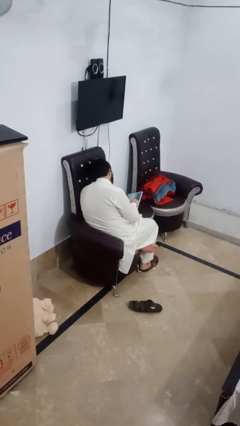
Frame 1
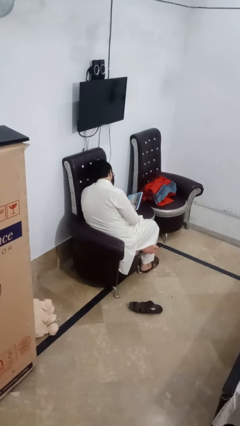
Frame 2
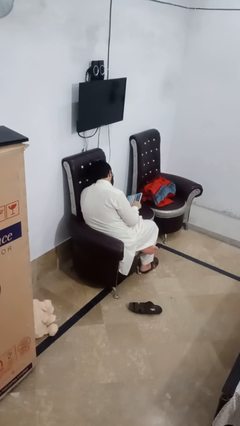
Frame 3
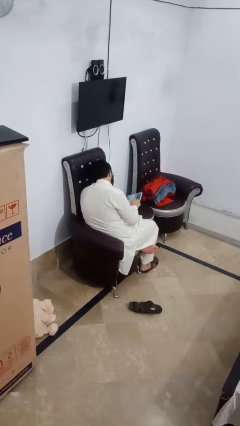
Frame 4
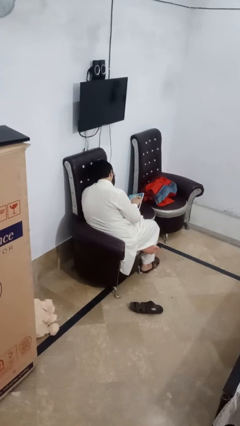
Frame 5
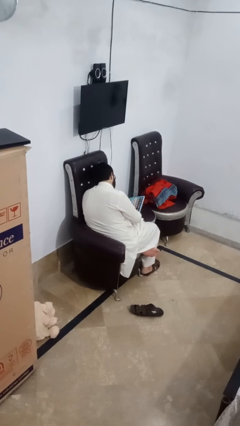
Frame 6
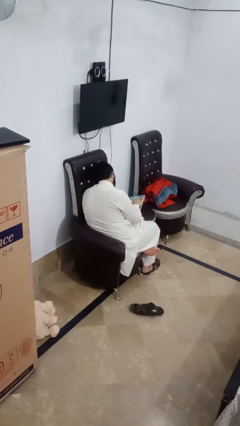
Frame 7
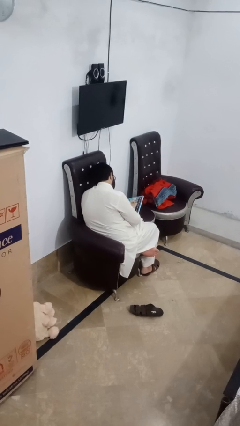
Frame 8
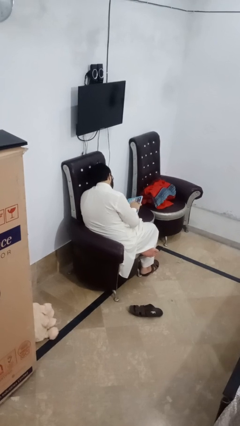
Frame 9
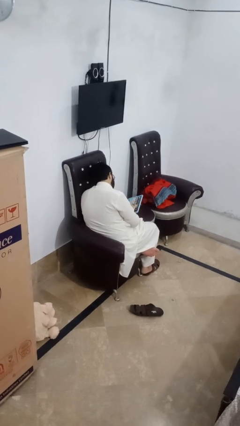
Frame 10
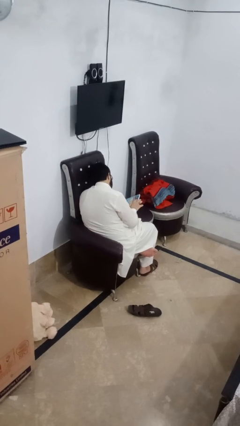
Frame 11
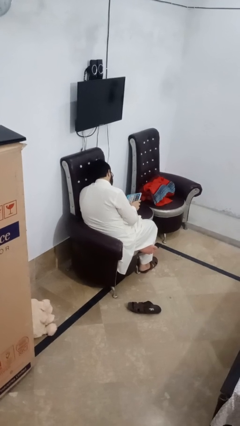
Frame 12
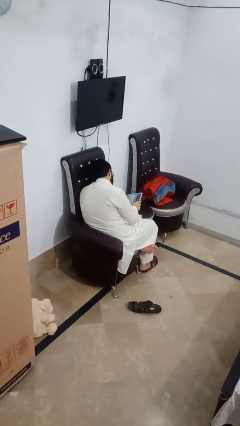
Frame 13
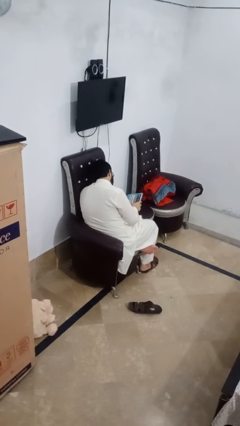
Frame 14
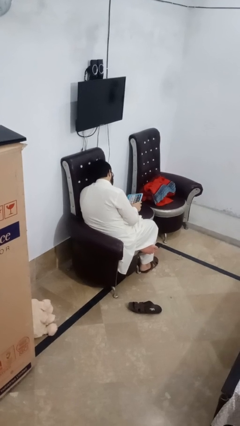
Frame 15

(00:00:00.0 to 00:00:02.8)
person interacts with tablet

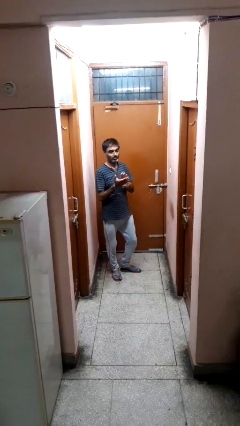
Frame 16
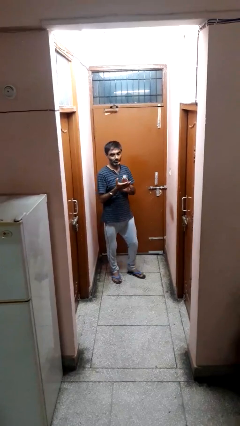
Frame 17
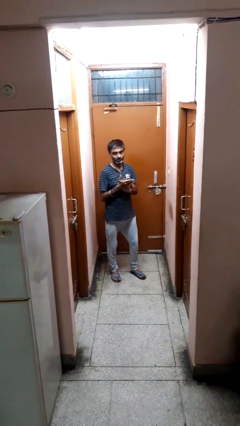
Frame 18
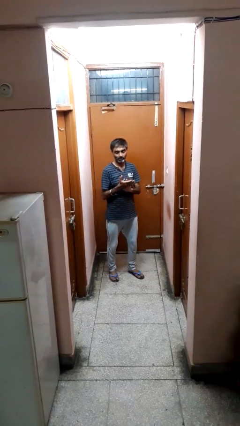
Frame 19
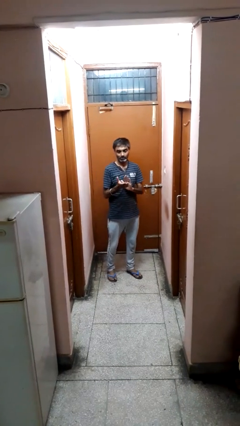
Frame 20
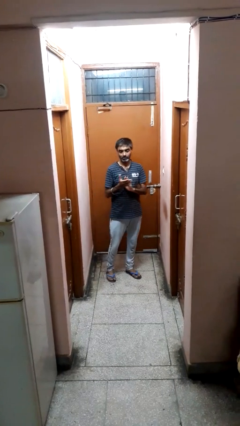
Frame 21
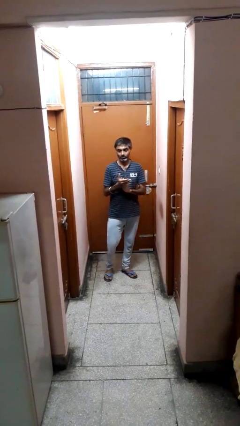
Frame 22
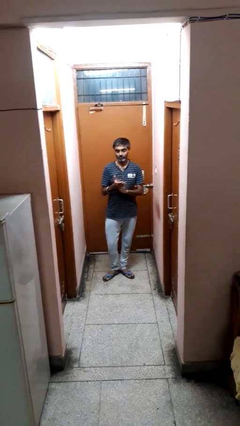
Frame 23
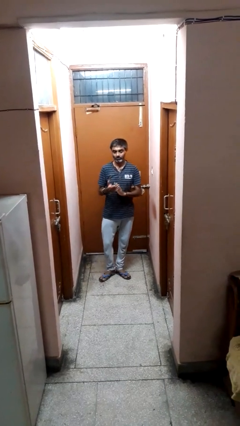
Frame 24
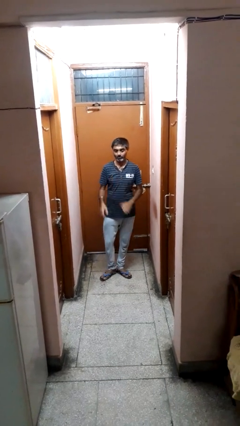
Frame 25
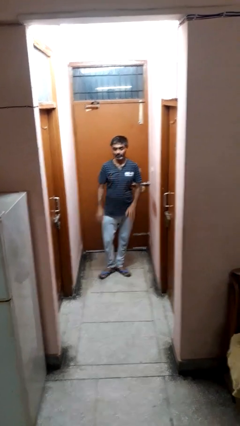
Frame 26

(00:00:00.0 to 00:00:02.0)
person claps hands

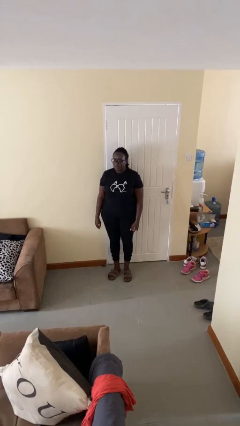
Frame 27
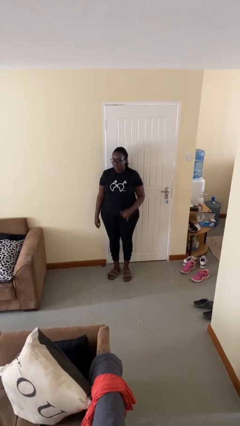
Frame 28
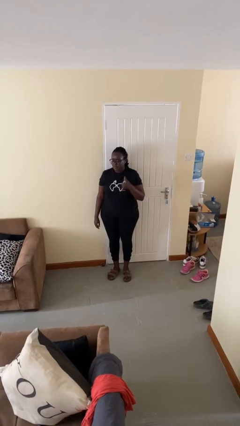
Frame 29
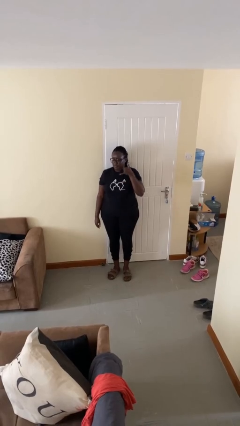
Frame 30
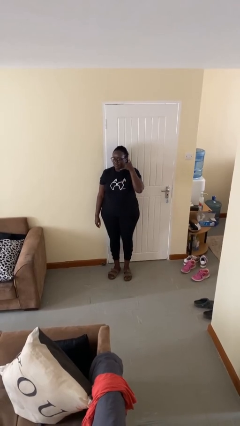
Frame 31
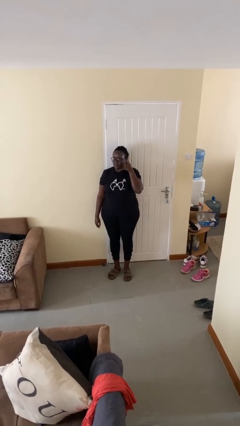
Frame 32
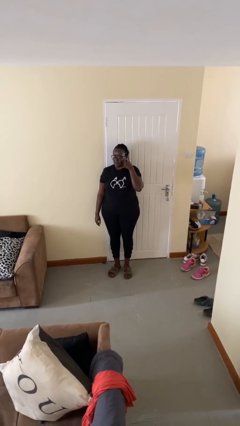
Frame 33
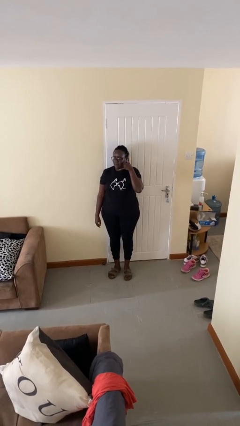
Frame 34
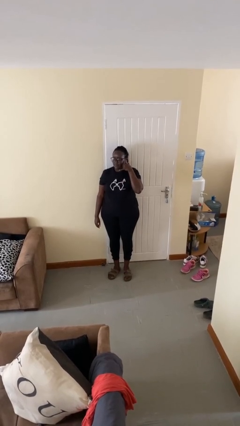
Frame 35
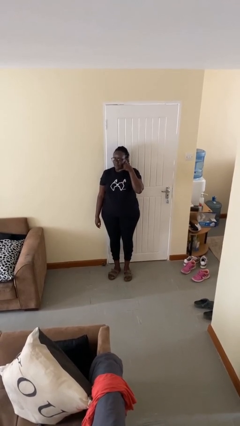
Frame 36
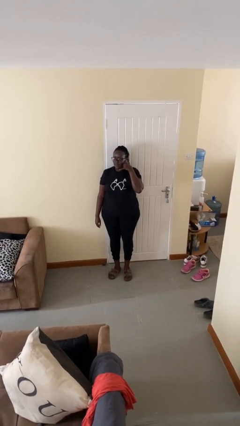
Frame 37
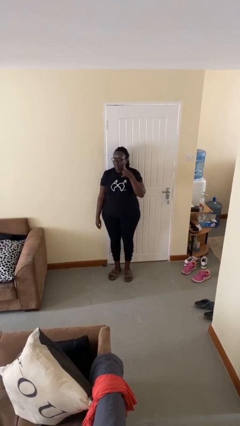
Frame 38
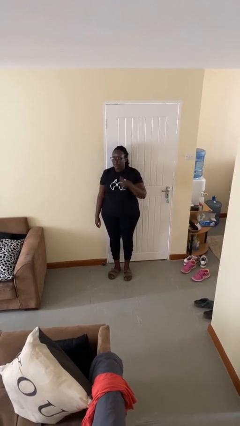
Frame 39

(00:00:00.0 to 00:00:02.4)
person gestures call me

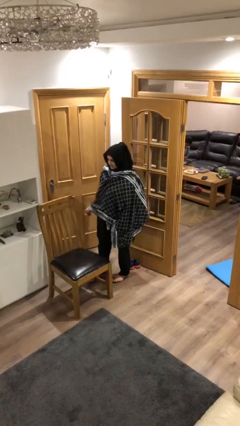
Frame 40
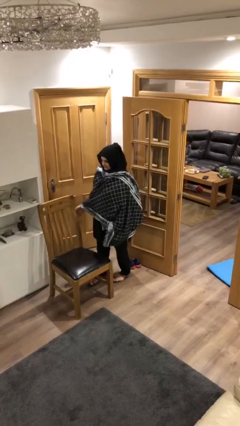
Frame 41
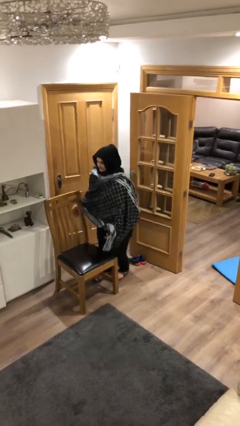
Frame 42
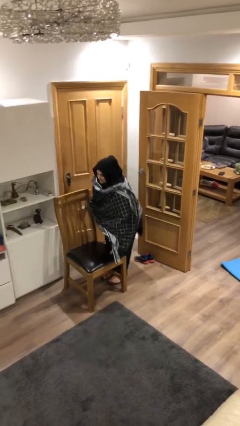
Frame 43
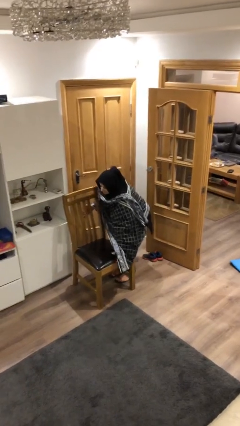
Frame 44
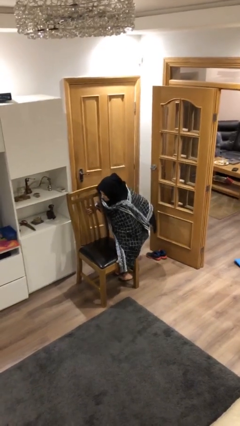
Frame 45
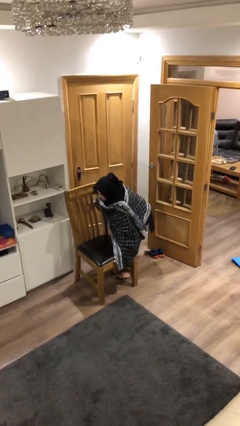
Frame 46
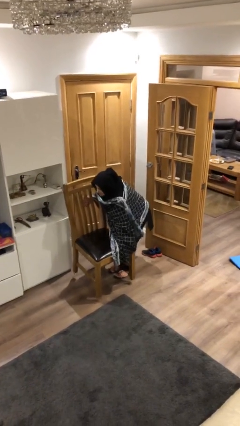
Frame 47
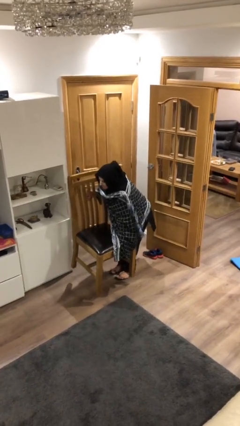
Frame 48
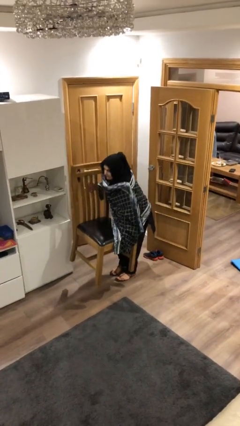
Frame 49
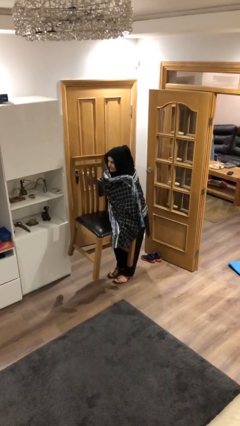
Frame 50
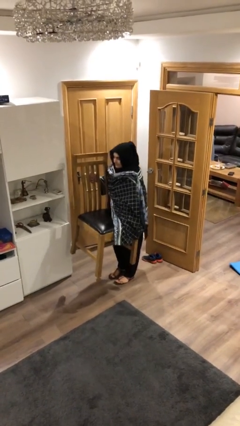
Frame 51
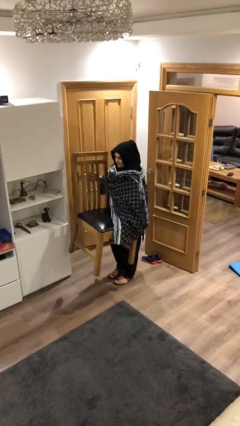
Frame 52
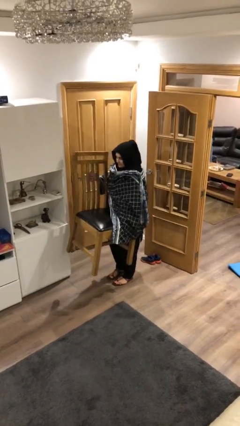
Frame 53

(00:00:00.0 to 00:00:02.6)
person picks up object from floor

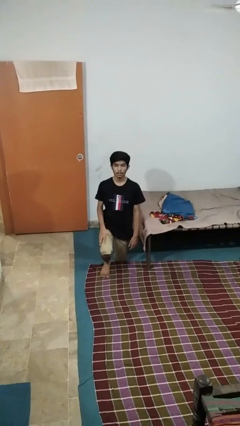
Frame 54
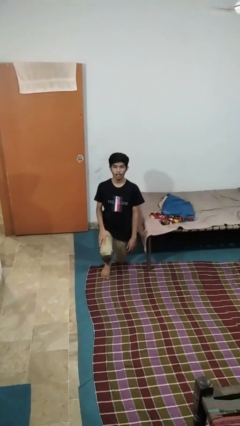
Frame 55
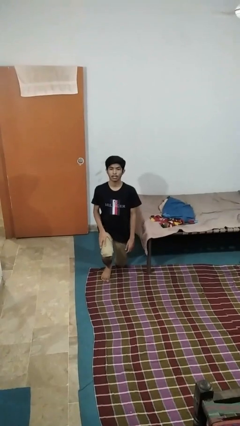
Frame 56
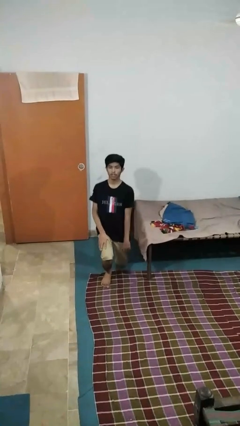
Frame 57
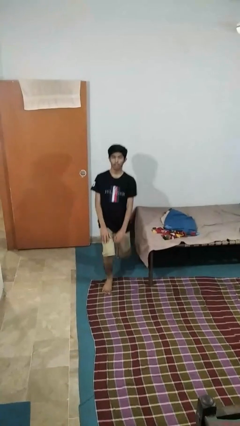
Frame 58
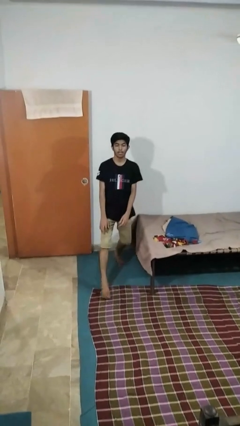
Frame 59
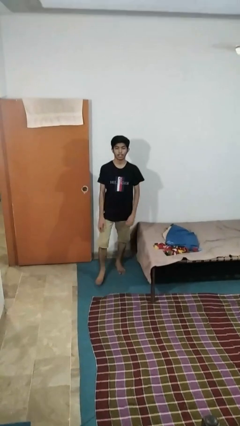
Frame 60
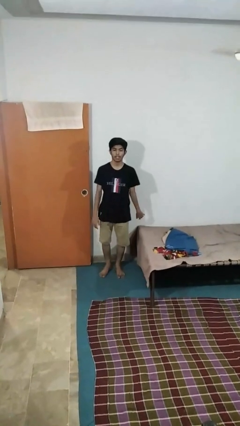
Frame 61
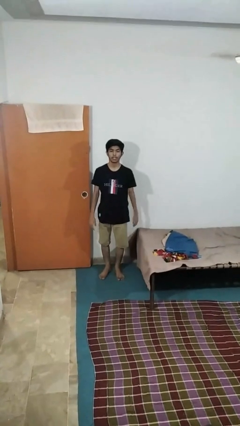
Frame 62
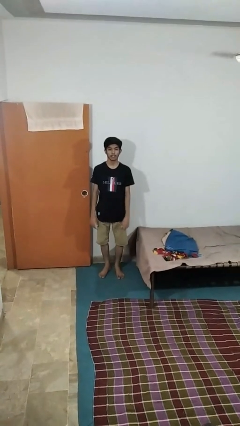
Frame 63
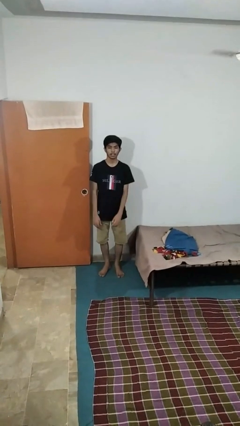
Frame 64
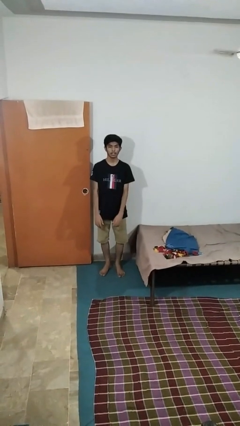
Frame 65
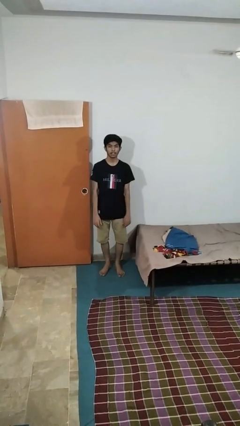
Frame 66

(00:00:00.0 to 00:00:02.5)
person stands up from floor

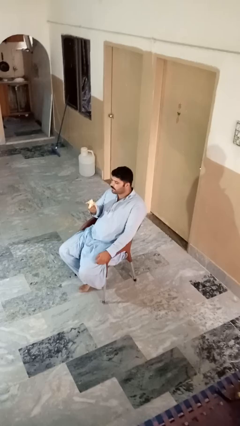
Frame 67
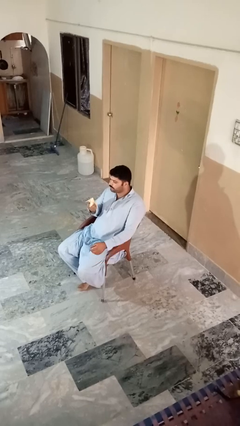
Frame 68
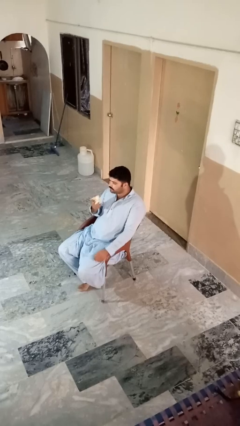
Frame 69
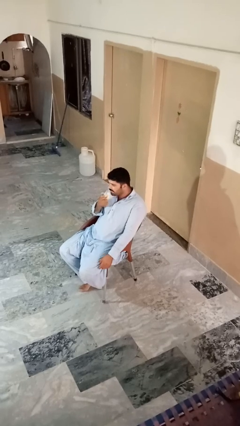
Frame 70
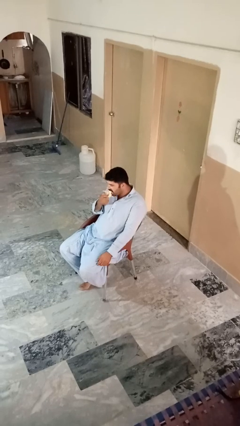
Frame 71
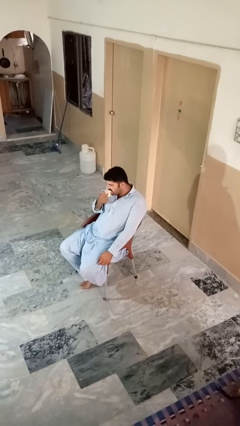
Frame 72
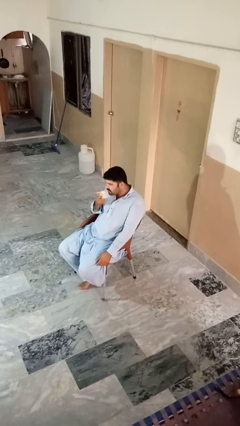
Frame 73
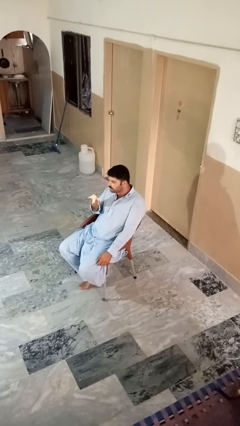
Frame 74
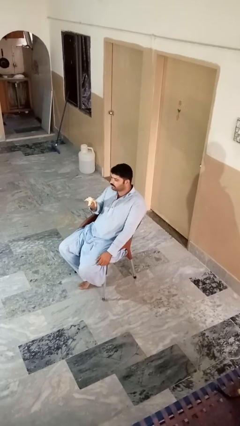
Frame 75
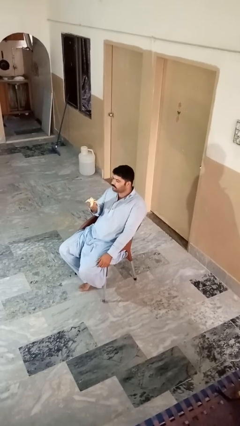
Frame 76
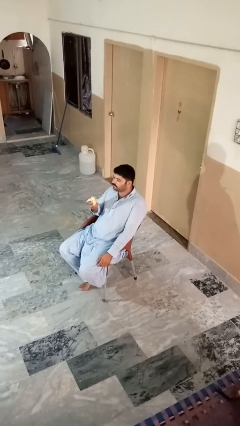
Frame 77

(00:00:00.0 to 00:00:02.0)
person eats banana

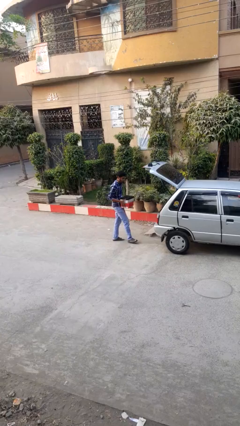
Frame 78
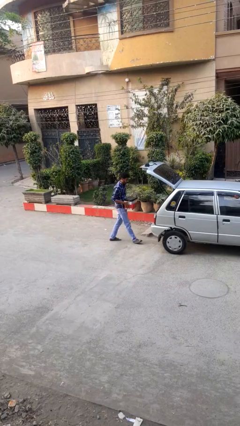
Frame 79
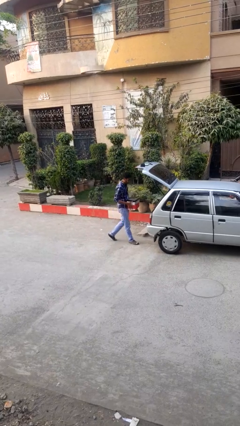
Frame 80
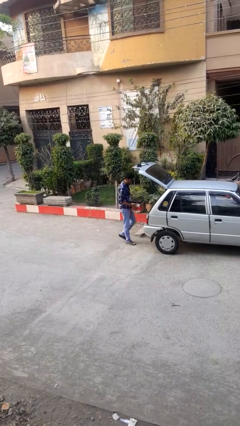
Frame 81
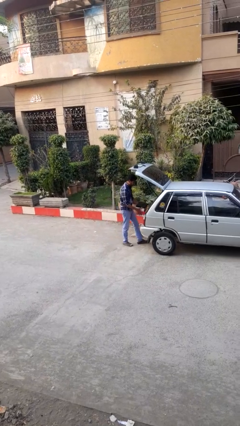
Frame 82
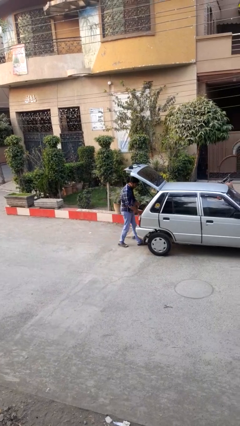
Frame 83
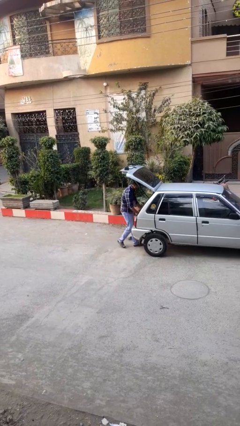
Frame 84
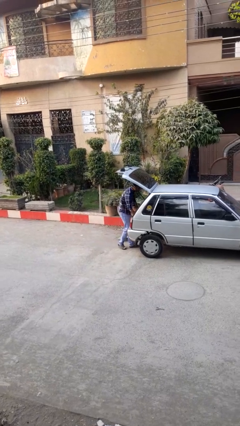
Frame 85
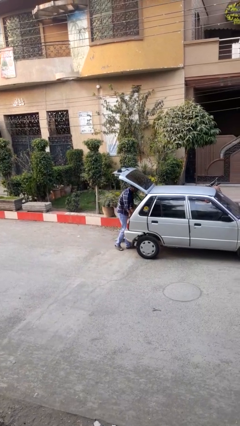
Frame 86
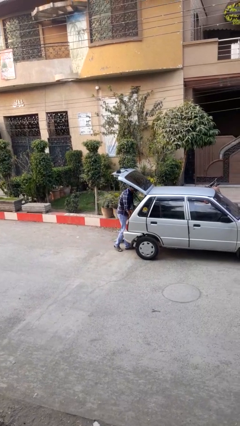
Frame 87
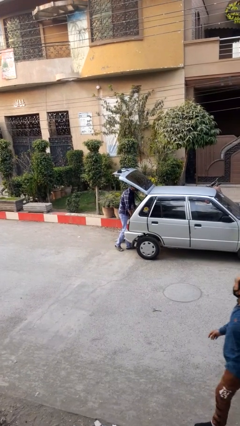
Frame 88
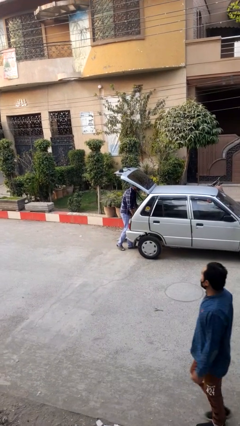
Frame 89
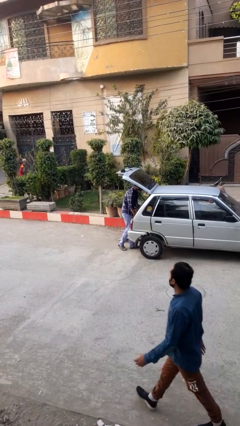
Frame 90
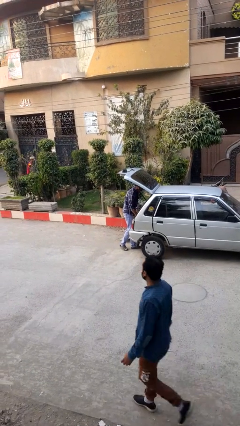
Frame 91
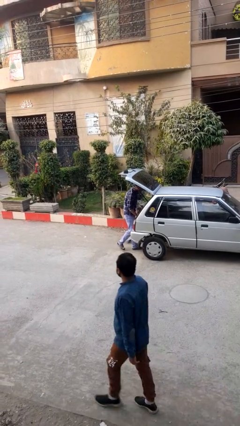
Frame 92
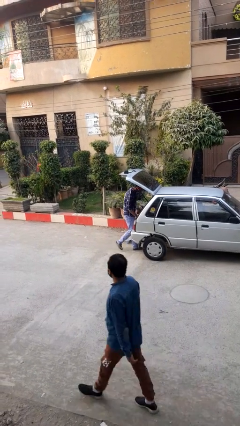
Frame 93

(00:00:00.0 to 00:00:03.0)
person loads car

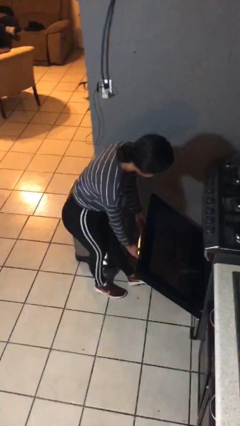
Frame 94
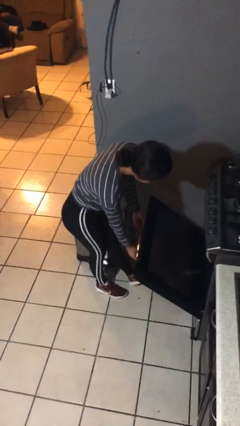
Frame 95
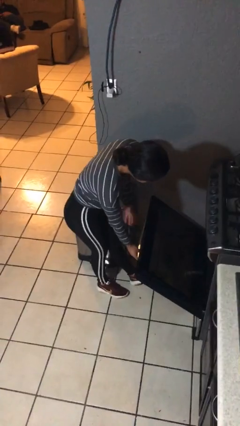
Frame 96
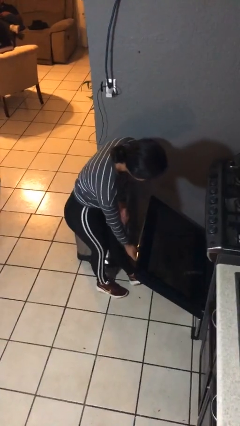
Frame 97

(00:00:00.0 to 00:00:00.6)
person opens oven door
